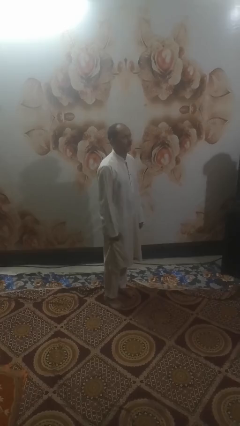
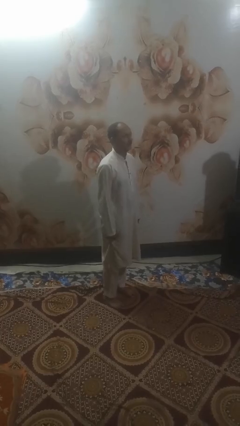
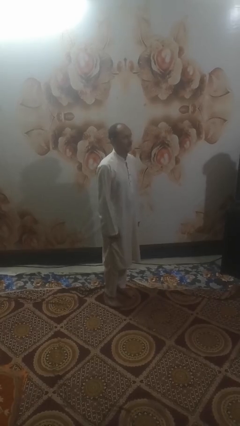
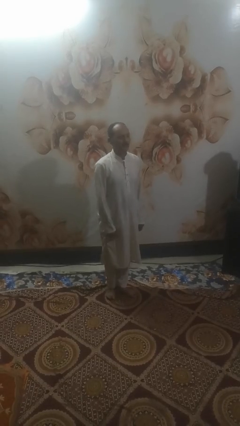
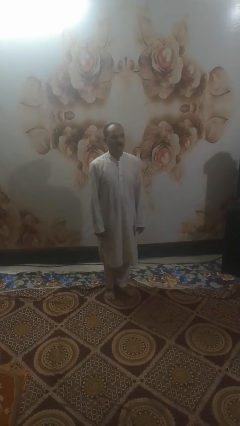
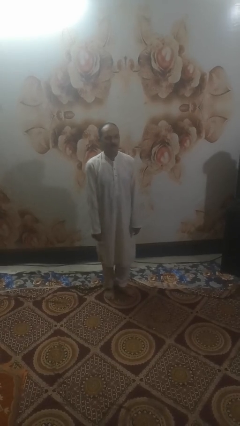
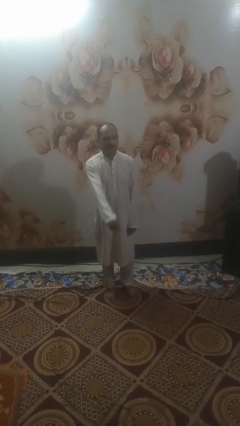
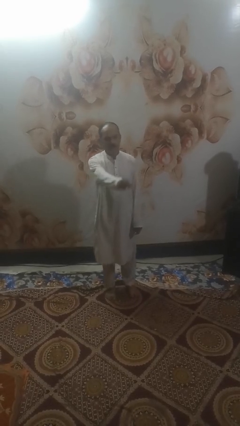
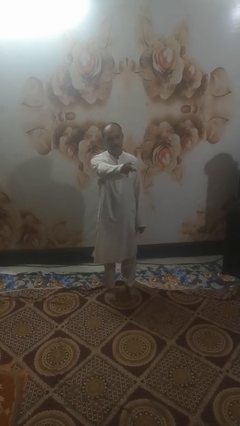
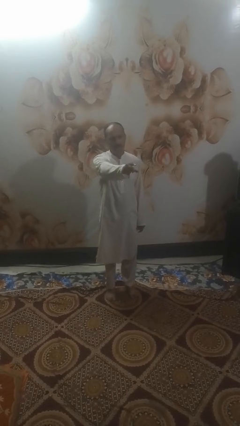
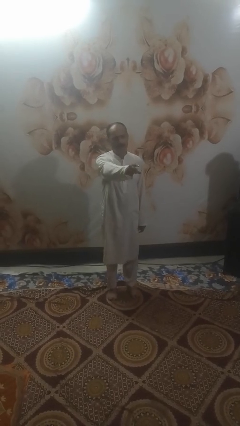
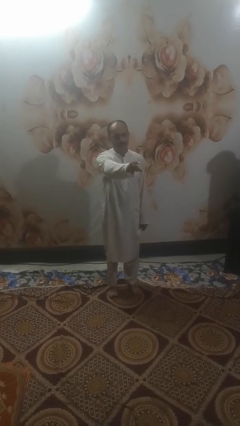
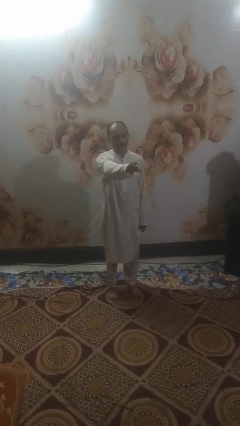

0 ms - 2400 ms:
person points at person

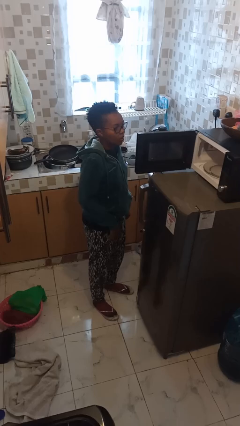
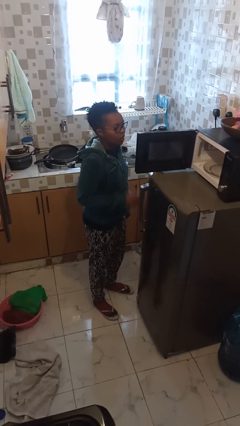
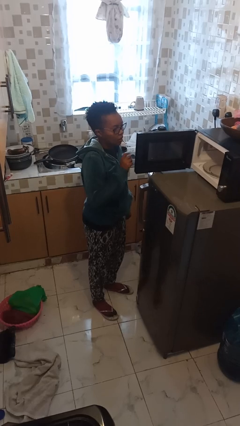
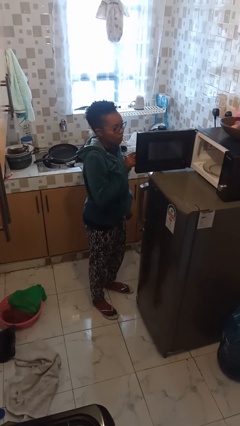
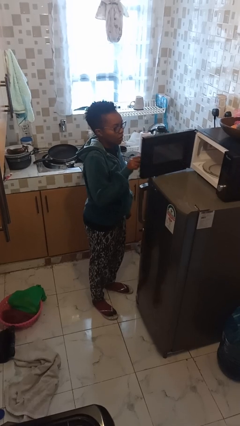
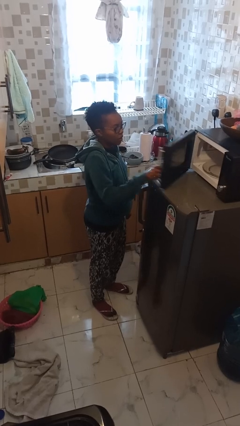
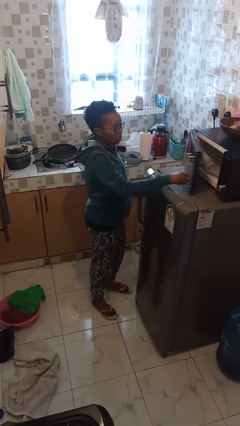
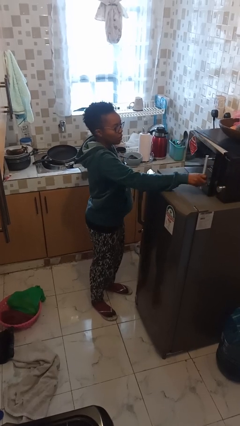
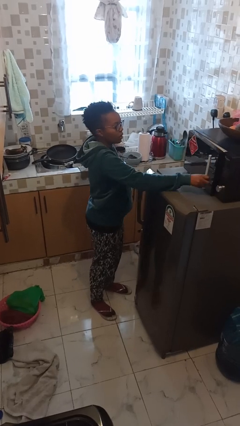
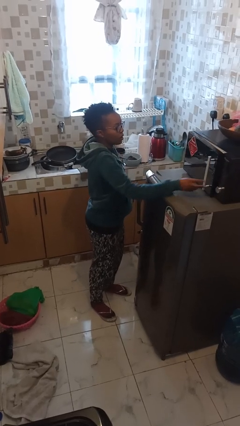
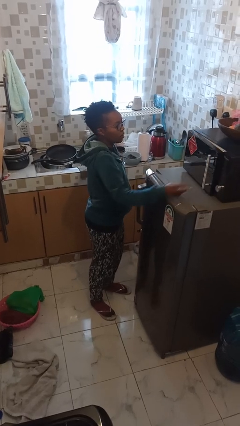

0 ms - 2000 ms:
person closes microwave

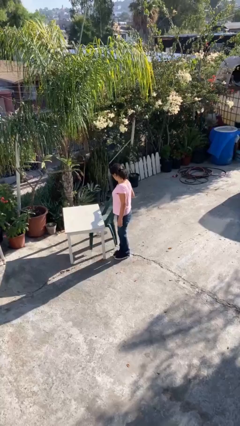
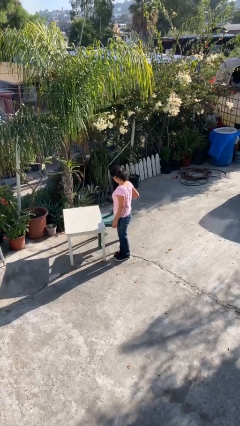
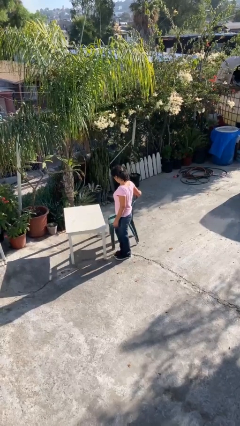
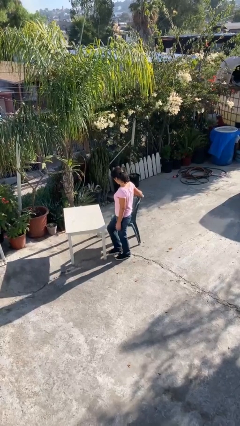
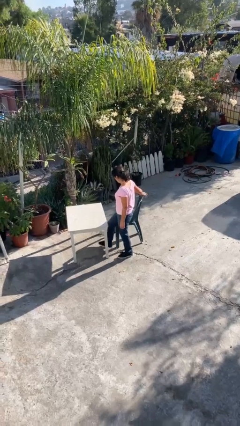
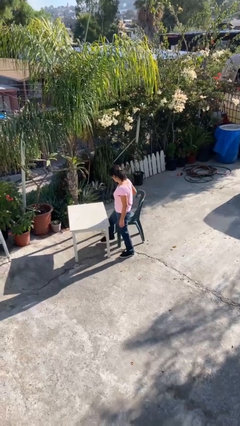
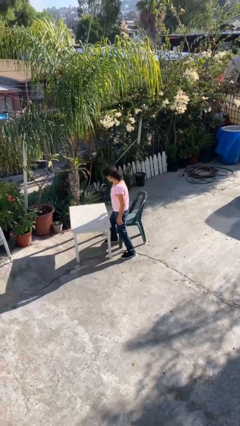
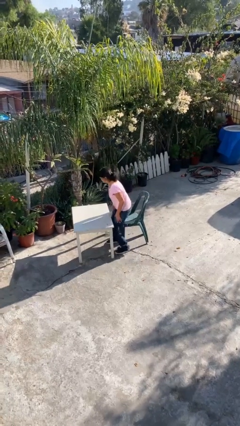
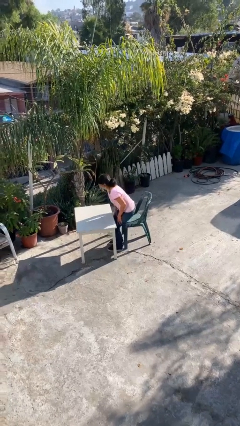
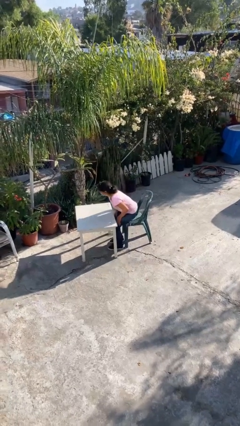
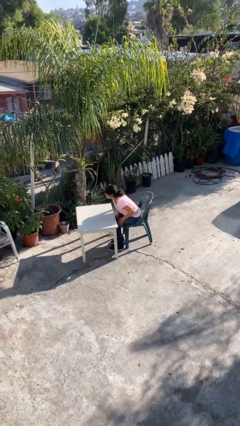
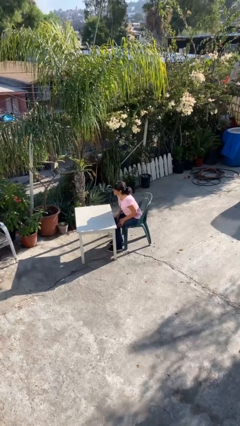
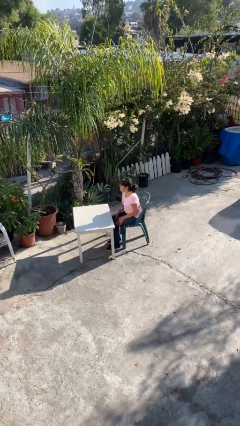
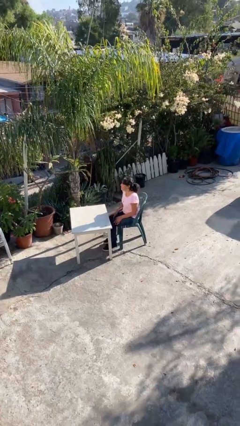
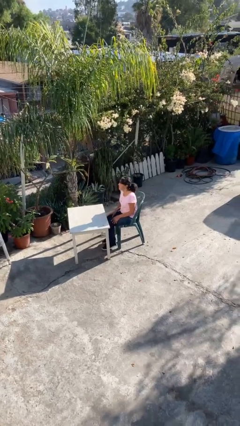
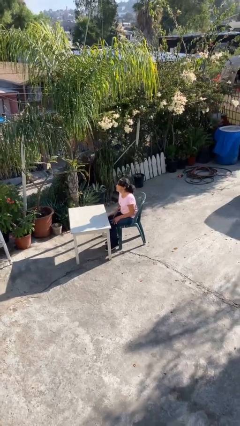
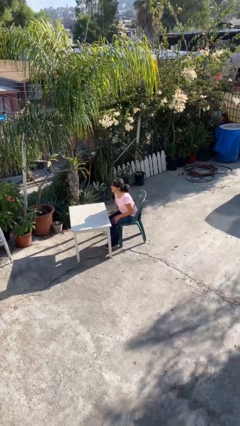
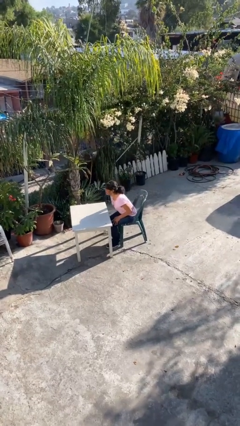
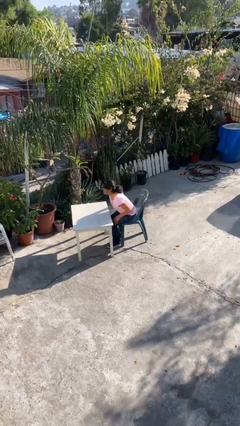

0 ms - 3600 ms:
person sits down

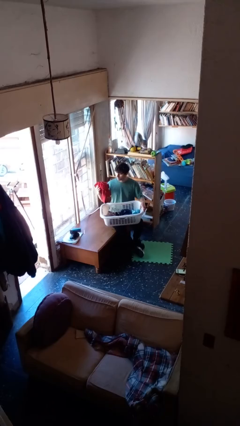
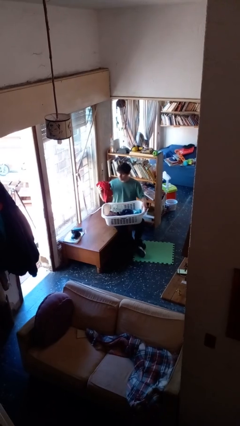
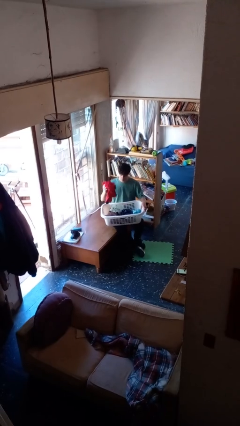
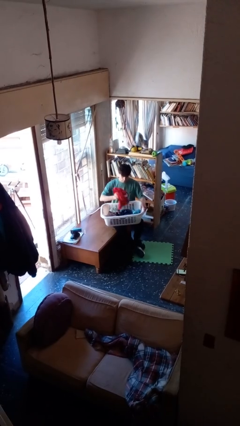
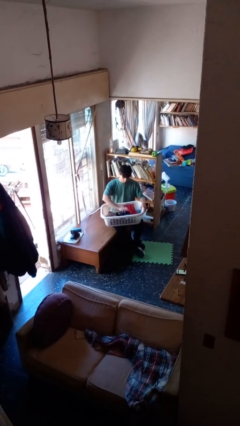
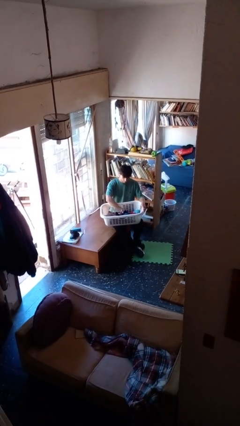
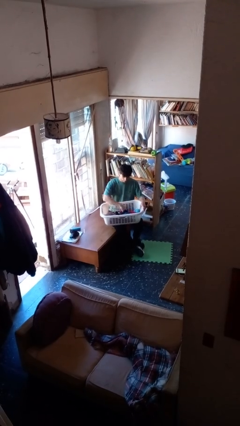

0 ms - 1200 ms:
person puts object into basket

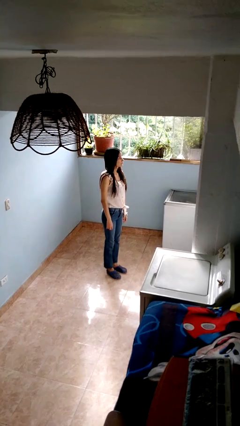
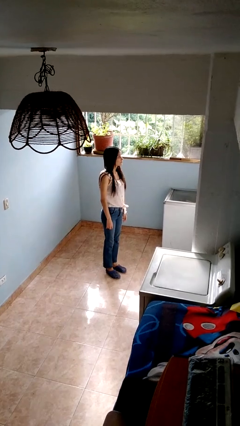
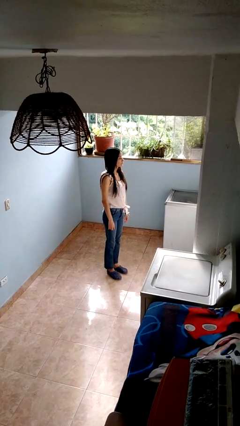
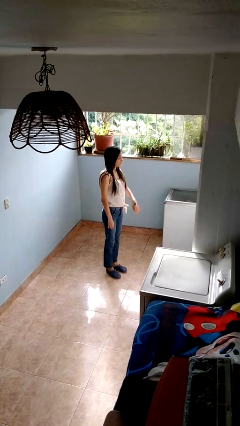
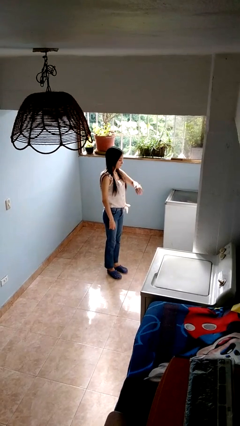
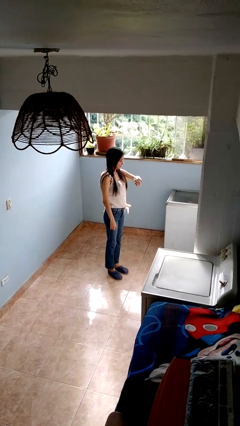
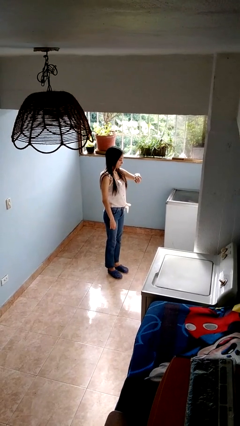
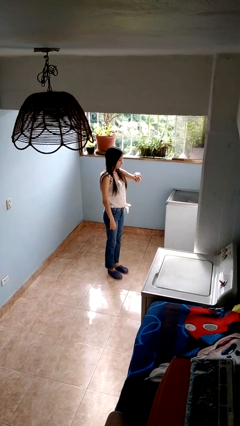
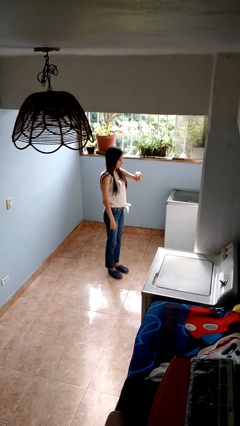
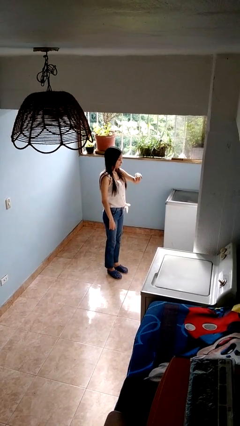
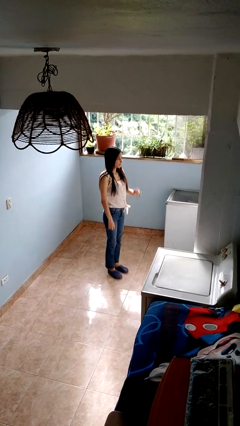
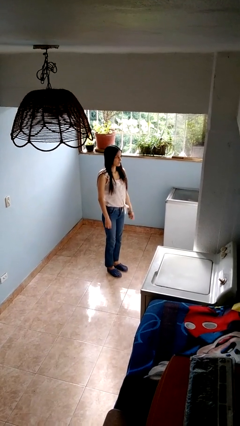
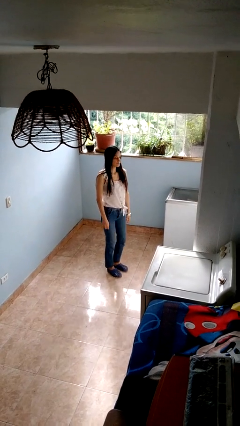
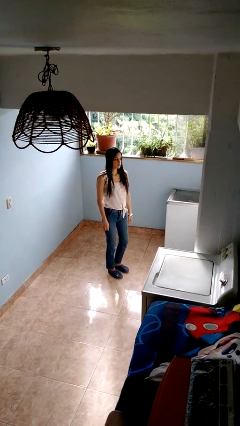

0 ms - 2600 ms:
person looks at wristwatch

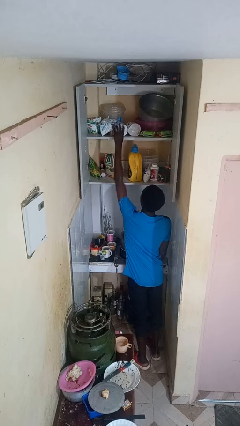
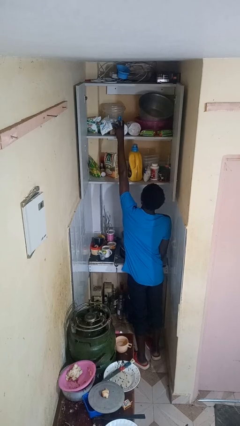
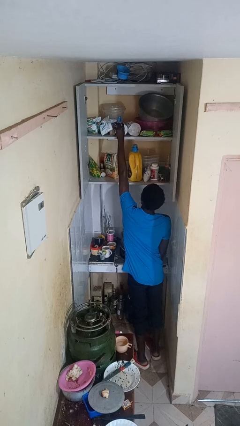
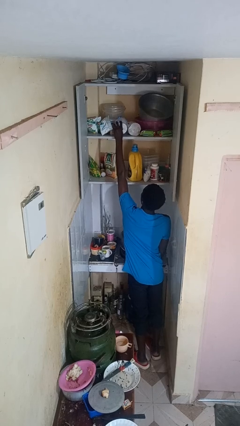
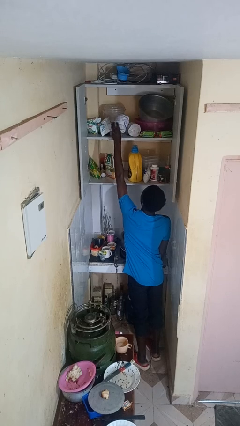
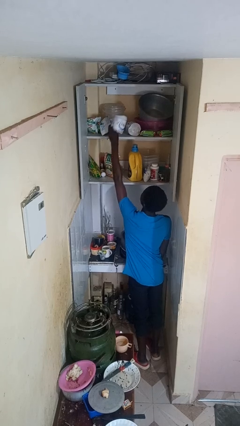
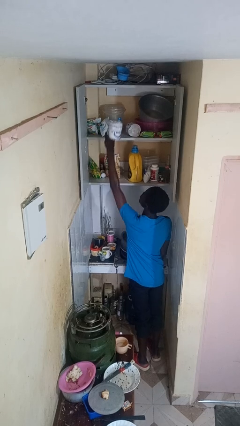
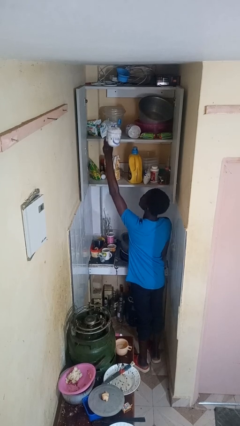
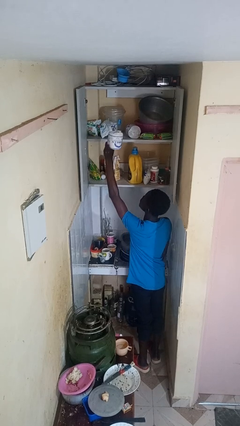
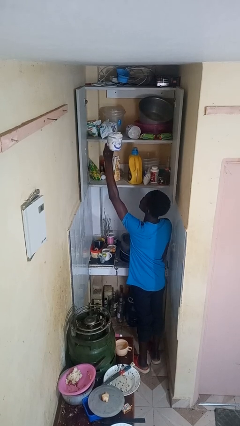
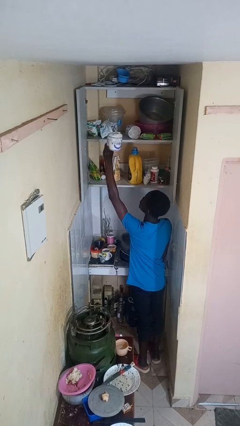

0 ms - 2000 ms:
person takes object from cabinet

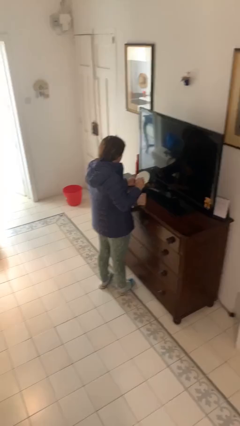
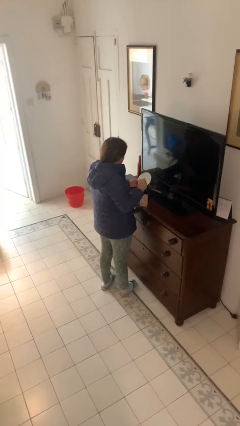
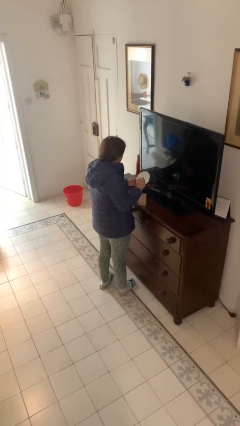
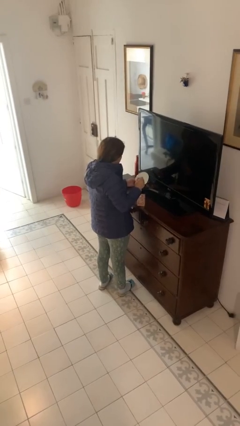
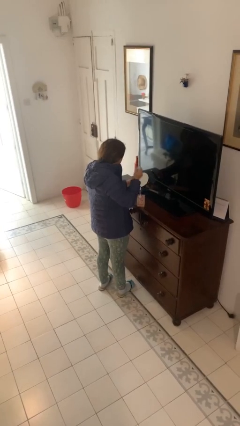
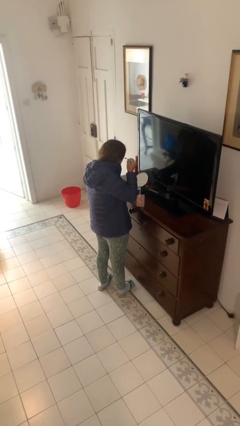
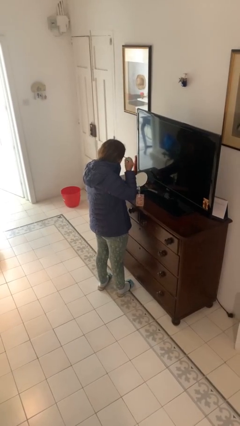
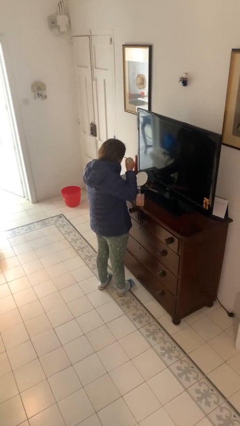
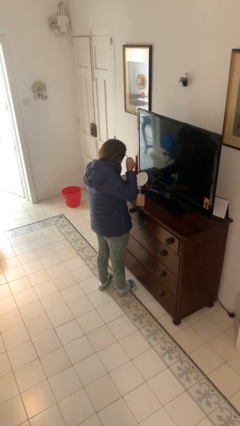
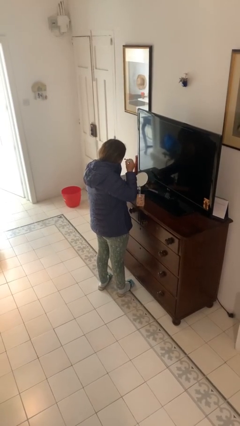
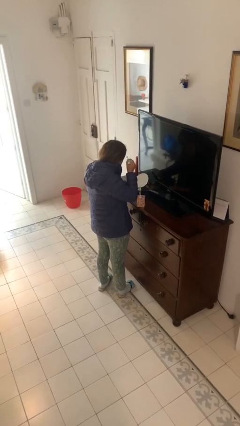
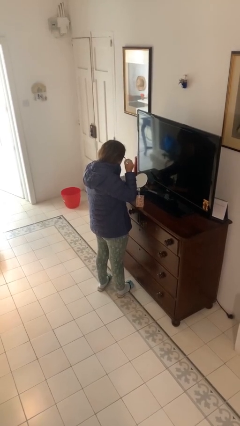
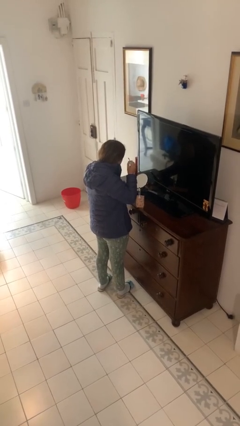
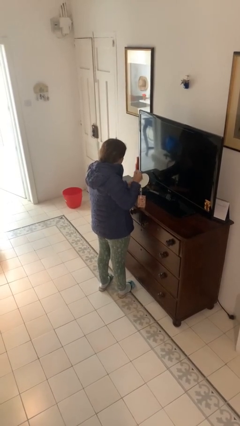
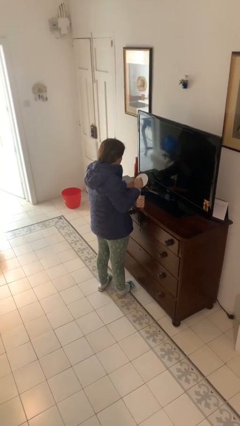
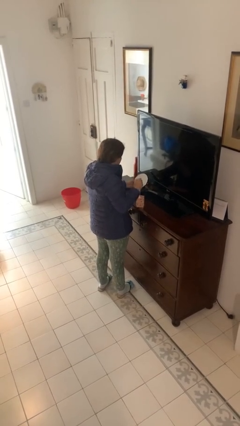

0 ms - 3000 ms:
person applies eye makeup

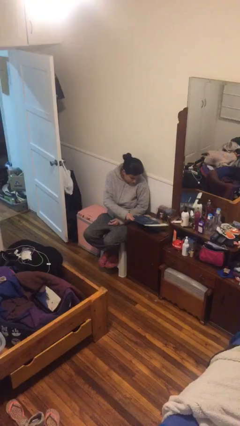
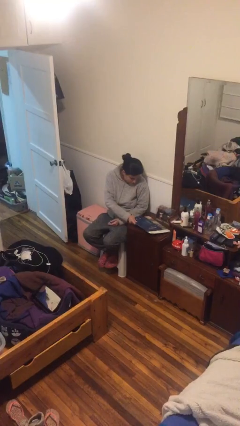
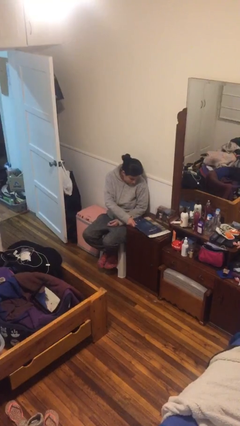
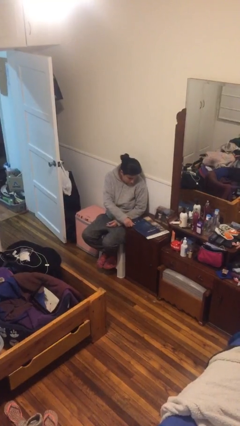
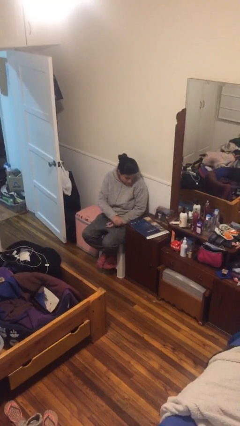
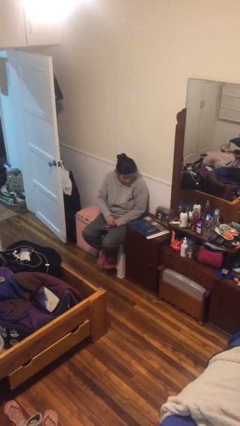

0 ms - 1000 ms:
person puts down object on table
